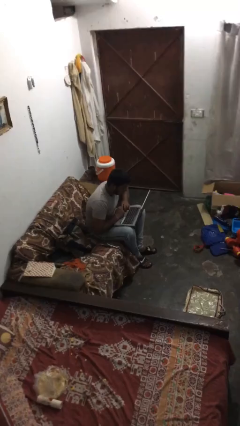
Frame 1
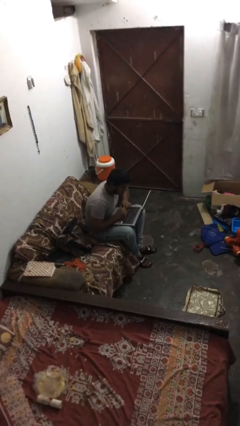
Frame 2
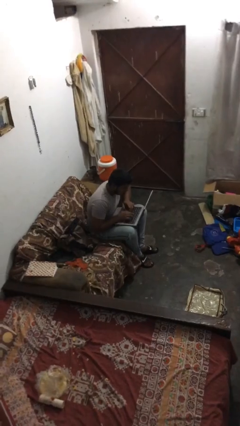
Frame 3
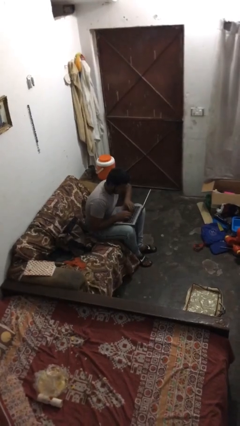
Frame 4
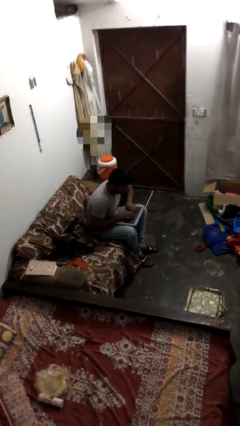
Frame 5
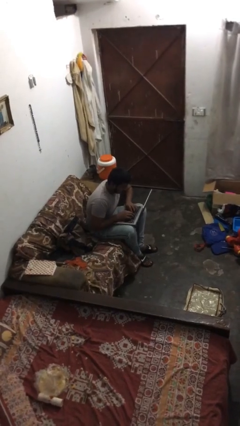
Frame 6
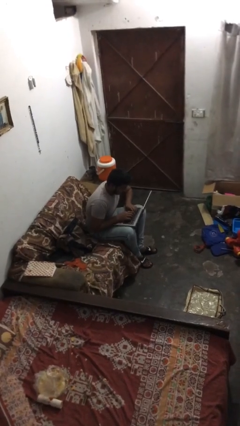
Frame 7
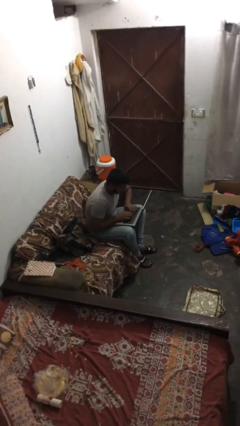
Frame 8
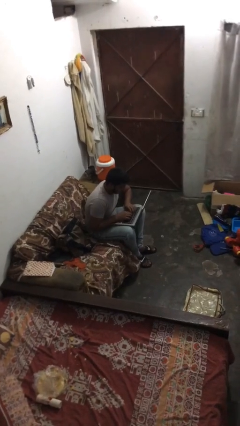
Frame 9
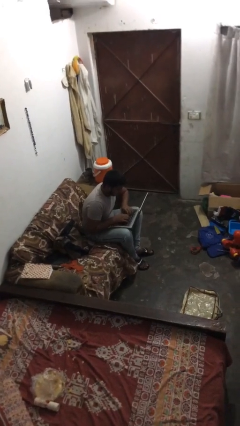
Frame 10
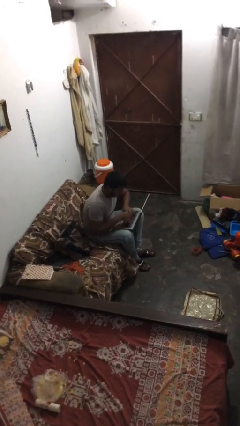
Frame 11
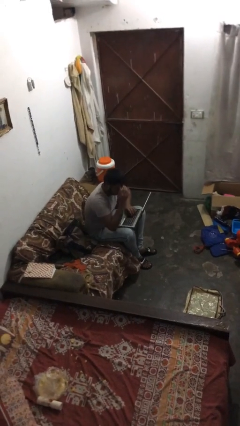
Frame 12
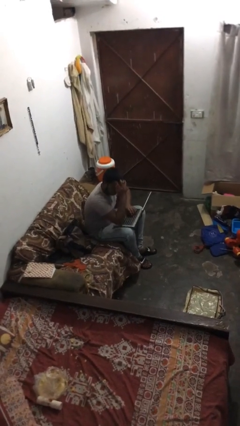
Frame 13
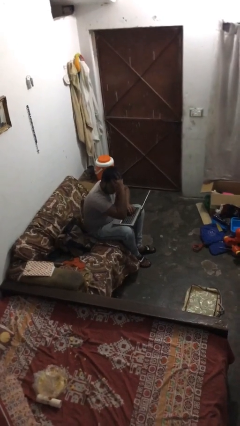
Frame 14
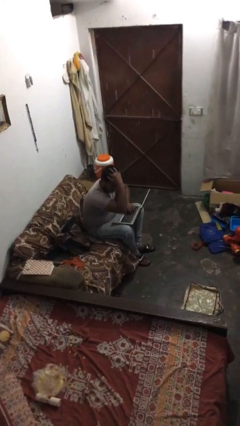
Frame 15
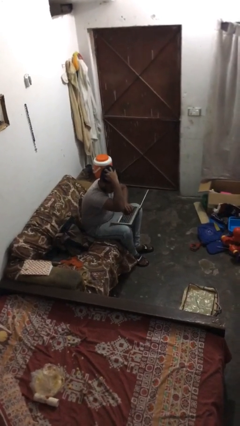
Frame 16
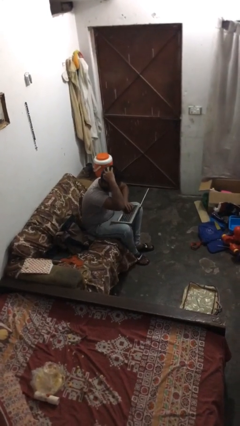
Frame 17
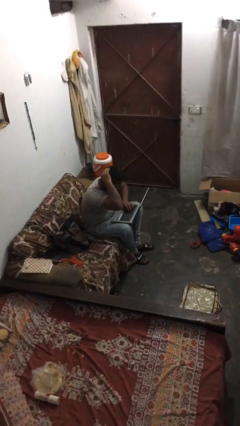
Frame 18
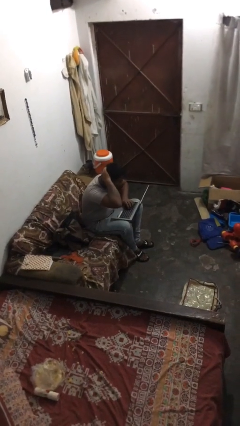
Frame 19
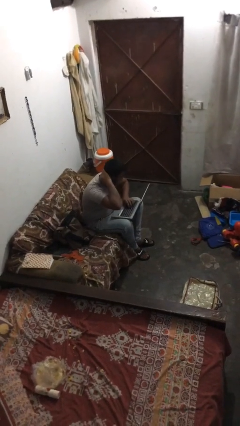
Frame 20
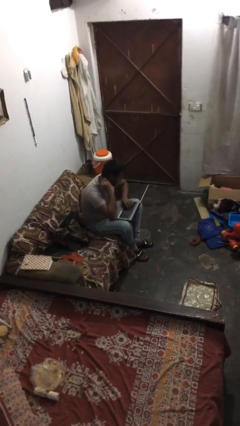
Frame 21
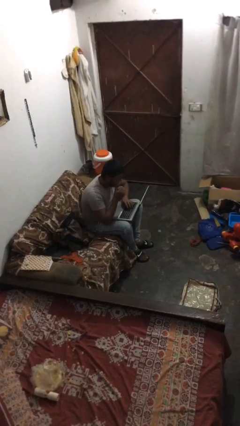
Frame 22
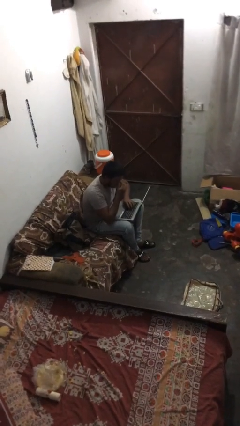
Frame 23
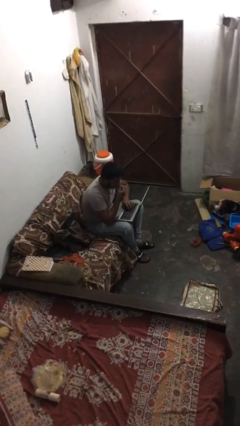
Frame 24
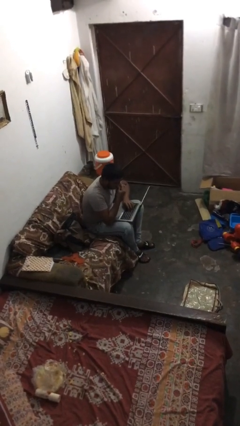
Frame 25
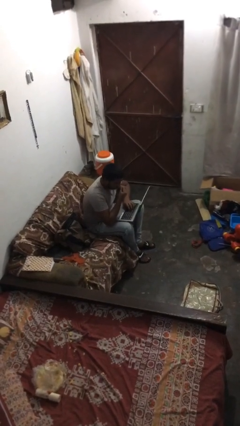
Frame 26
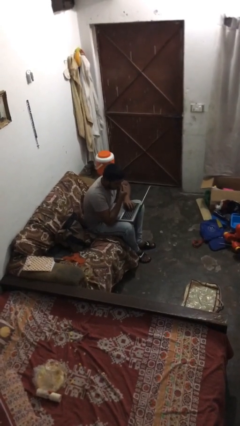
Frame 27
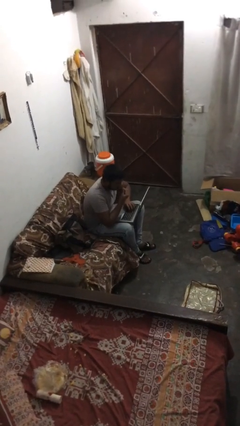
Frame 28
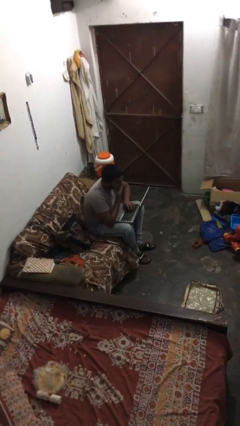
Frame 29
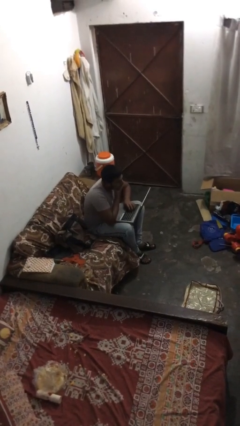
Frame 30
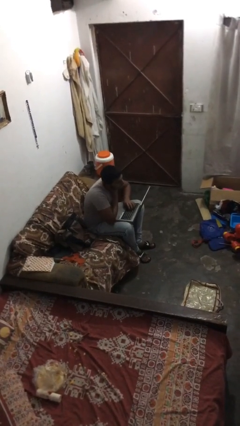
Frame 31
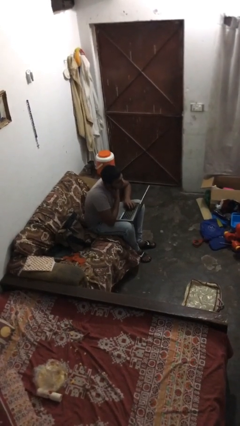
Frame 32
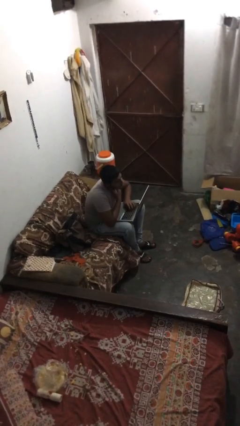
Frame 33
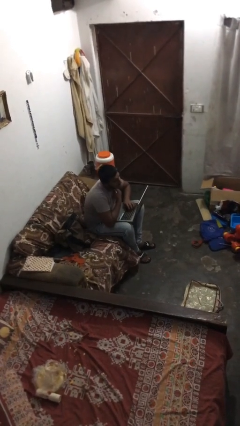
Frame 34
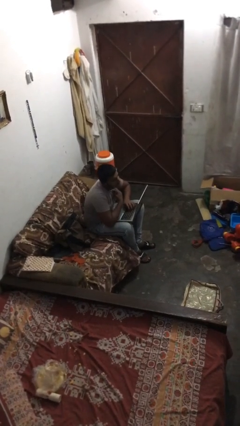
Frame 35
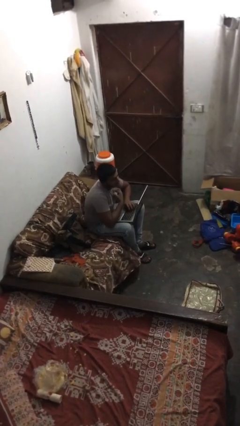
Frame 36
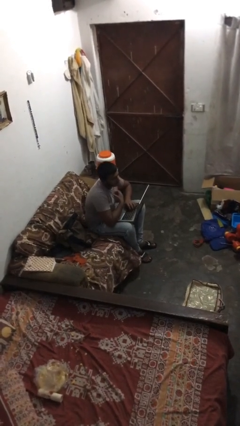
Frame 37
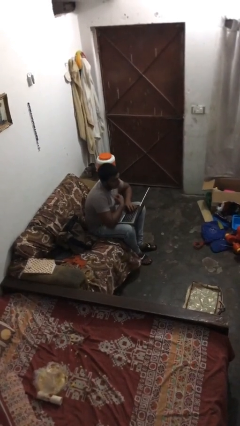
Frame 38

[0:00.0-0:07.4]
person interacts with laptop

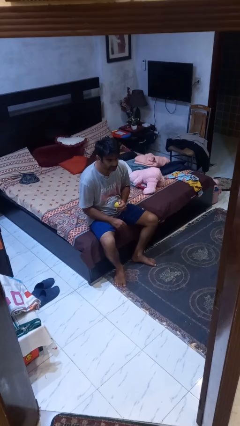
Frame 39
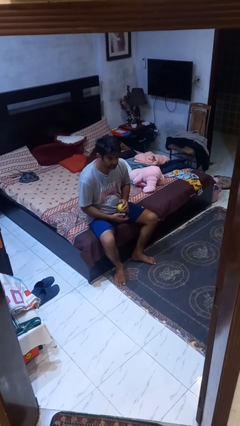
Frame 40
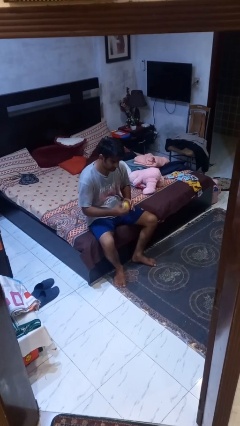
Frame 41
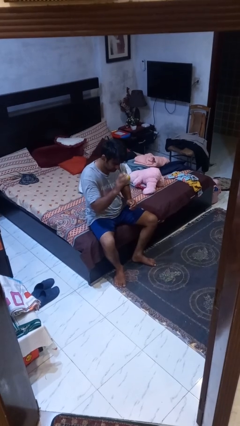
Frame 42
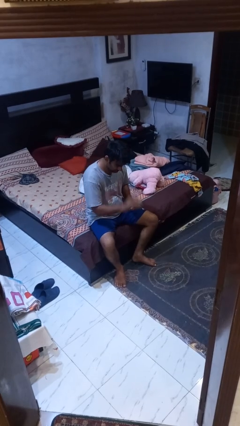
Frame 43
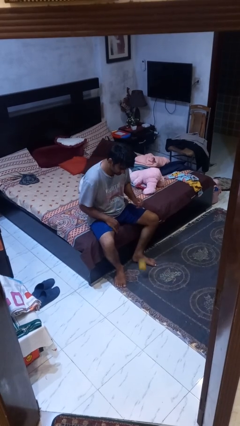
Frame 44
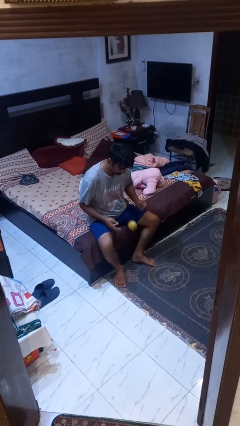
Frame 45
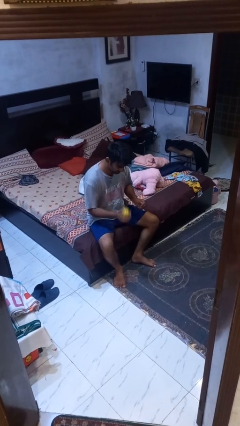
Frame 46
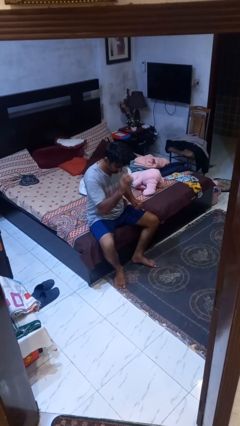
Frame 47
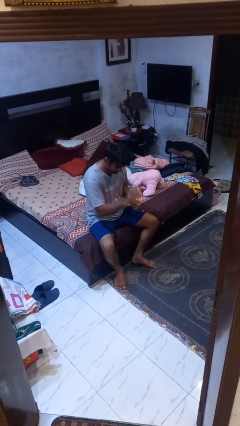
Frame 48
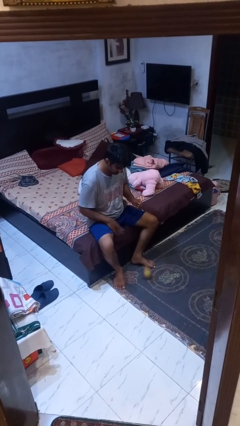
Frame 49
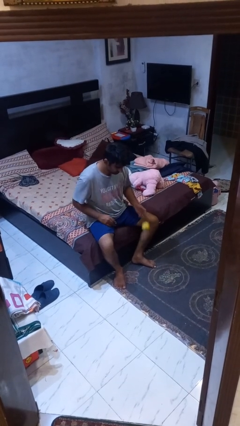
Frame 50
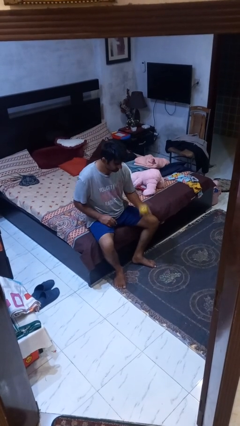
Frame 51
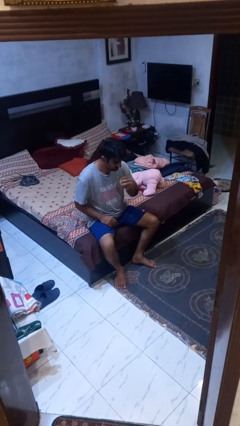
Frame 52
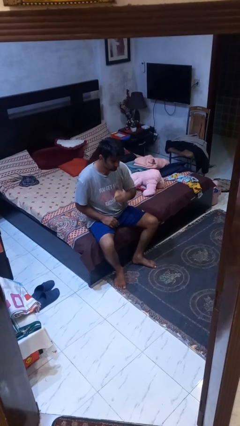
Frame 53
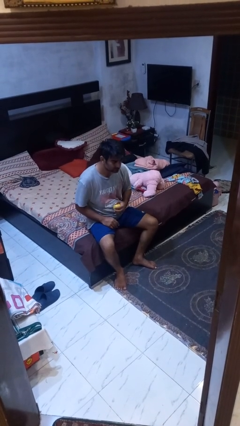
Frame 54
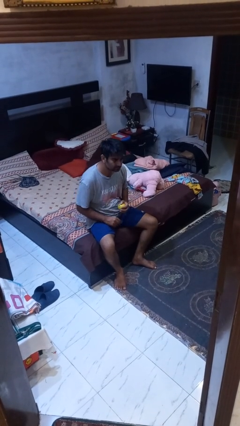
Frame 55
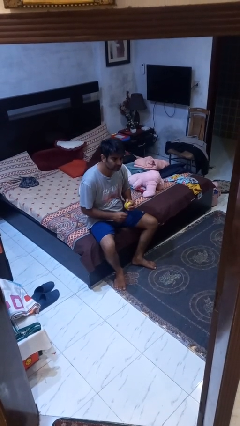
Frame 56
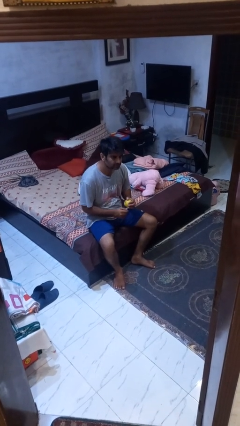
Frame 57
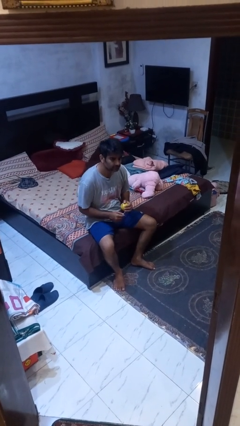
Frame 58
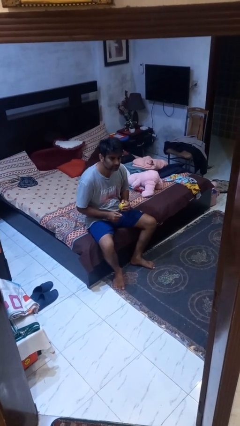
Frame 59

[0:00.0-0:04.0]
person bounces ball on floor

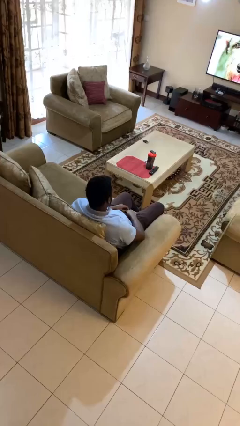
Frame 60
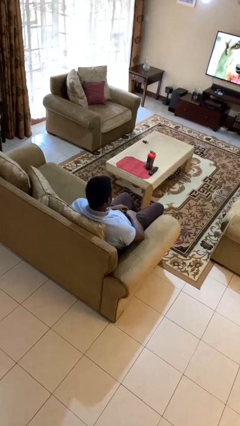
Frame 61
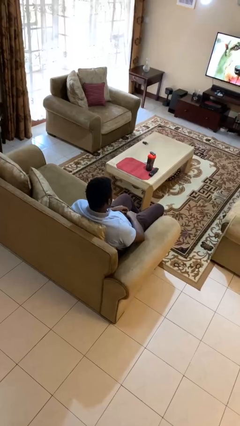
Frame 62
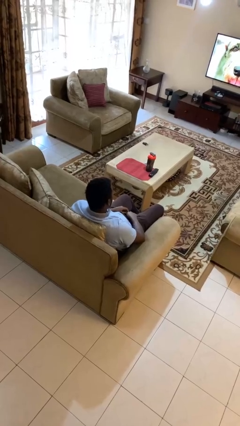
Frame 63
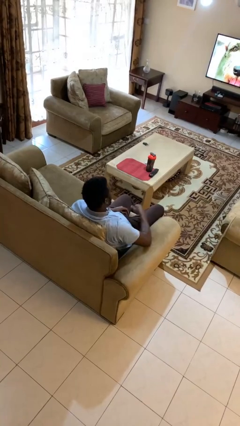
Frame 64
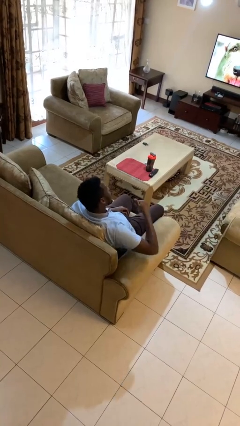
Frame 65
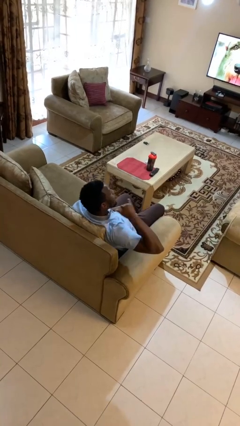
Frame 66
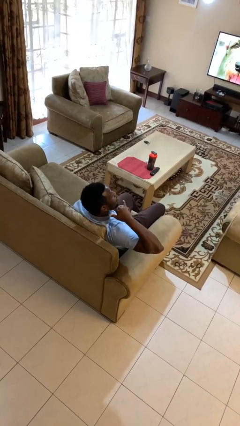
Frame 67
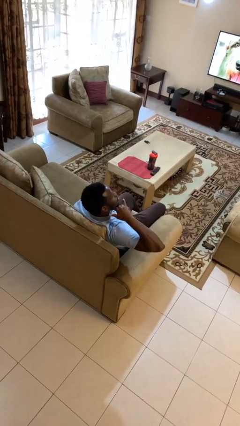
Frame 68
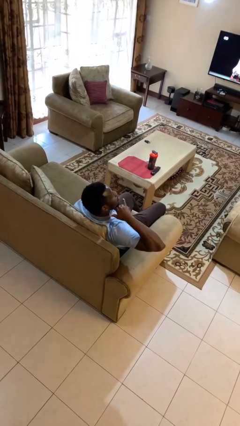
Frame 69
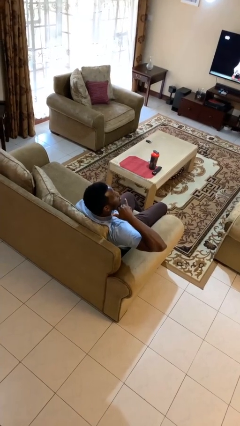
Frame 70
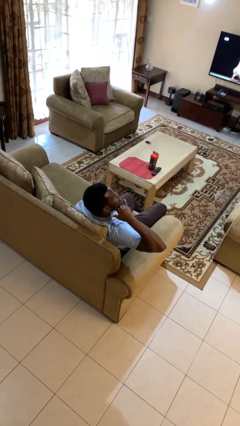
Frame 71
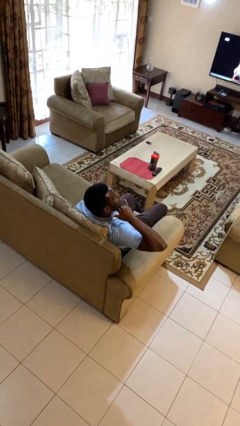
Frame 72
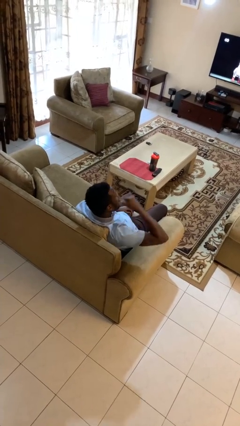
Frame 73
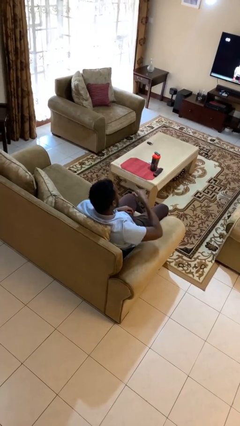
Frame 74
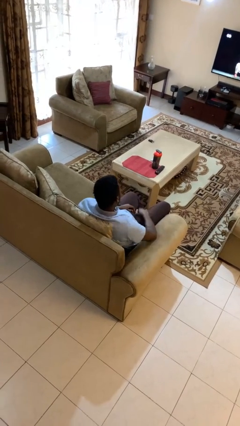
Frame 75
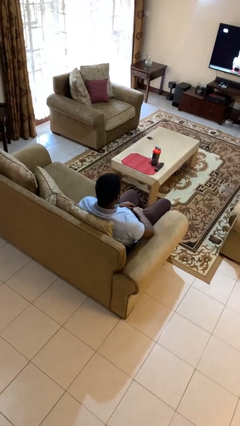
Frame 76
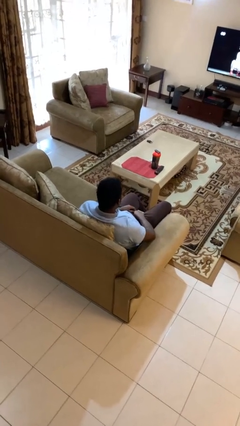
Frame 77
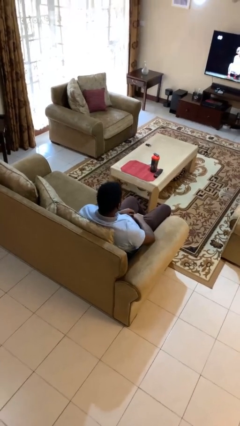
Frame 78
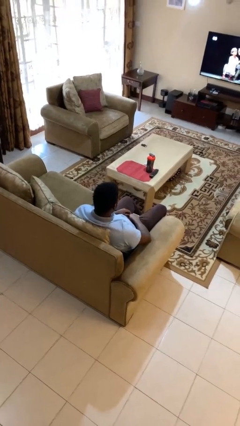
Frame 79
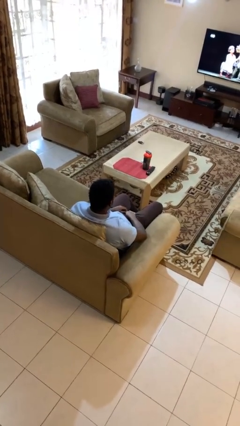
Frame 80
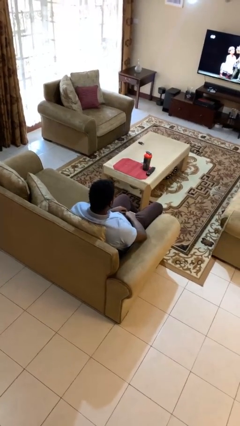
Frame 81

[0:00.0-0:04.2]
person gestures call me

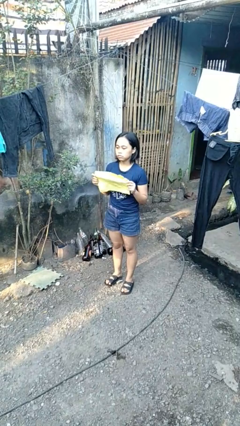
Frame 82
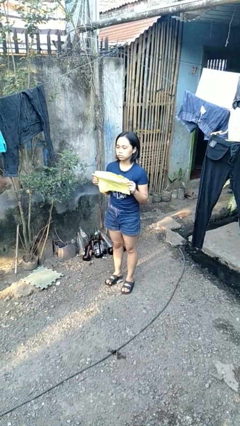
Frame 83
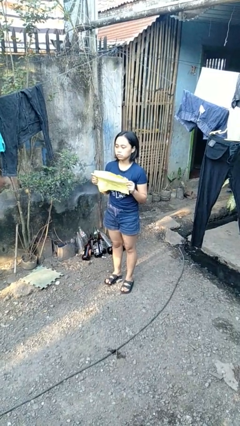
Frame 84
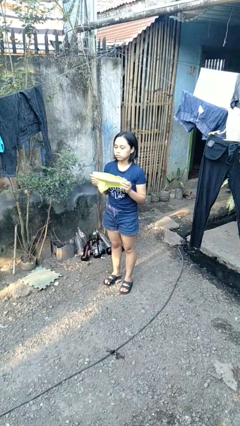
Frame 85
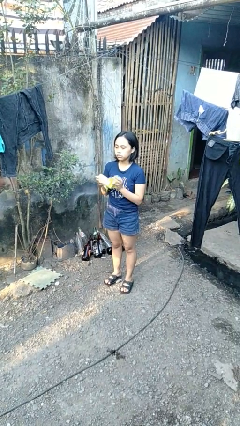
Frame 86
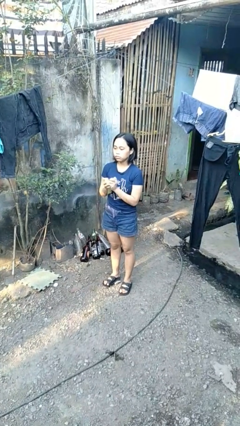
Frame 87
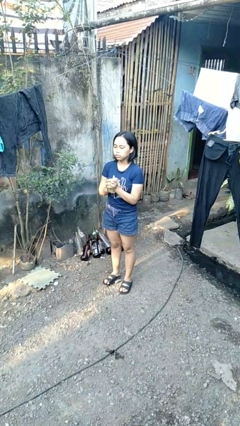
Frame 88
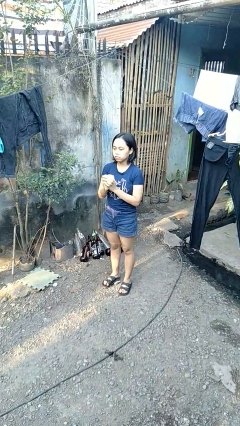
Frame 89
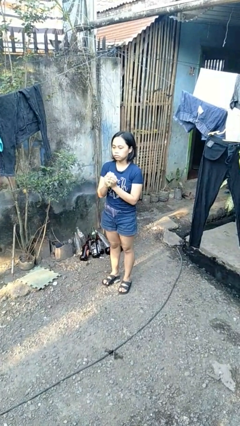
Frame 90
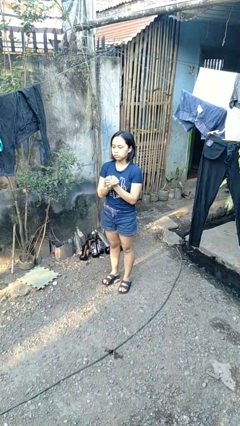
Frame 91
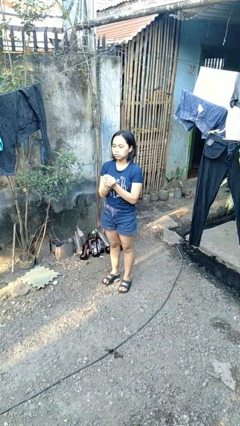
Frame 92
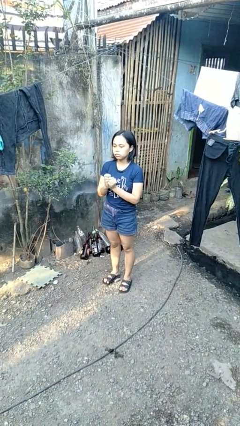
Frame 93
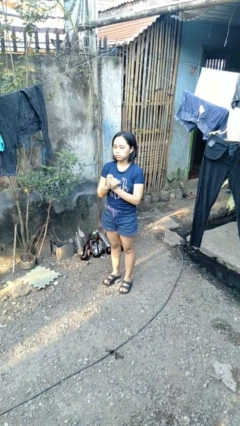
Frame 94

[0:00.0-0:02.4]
person crumples paper
